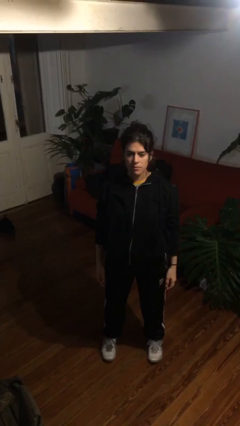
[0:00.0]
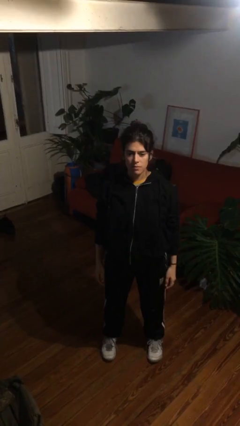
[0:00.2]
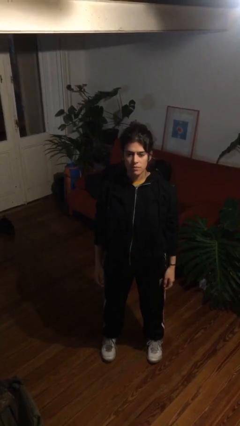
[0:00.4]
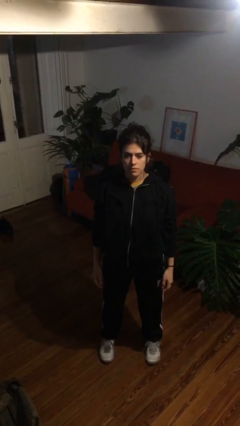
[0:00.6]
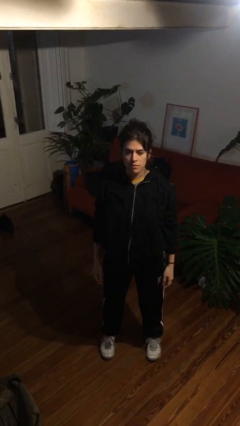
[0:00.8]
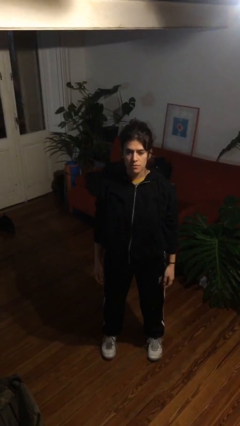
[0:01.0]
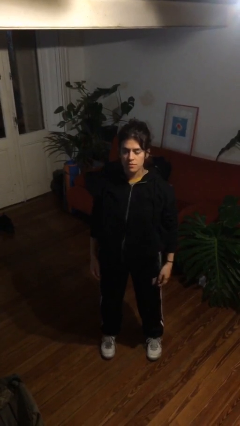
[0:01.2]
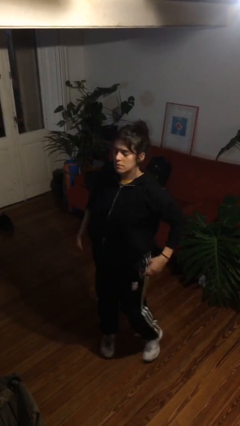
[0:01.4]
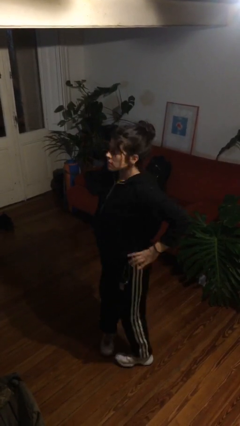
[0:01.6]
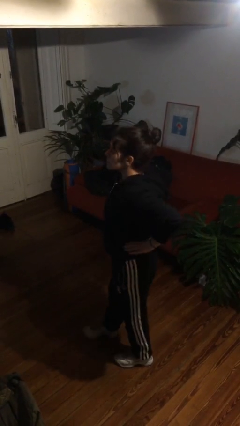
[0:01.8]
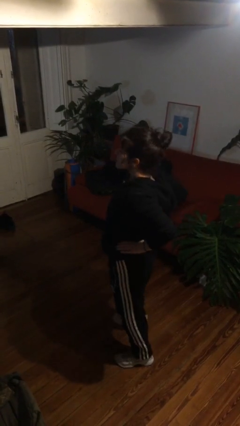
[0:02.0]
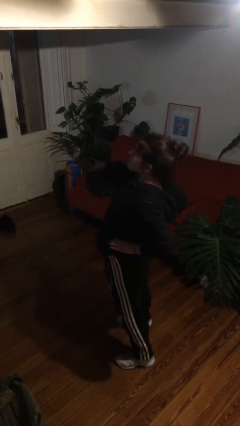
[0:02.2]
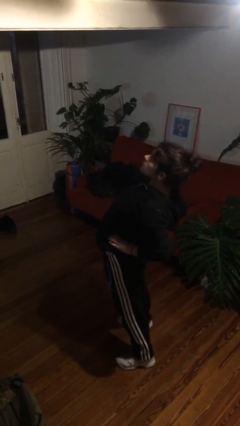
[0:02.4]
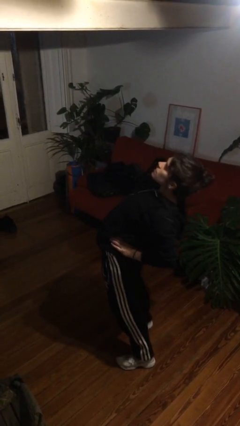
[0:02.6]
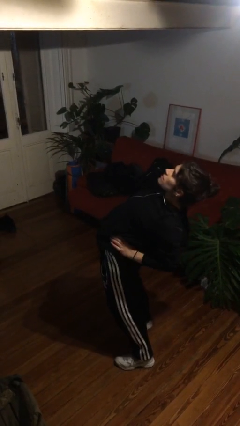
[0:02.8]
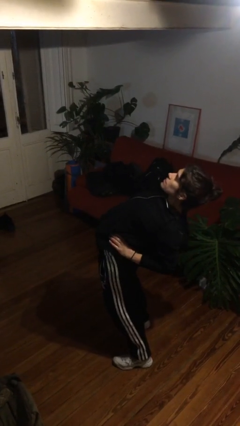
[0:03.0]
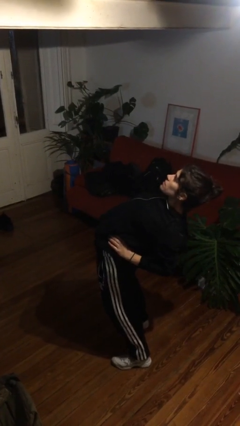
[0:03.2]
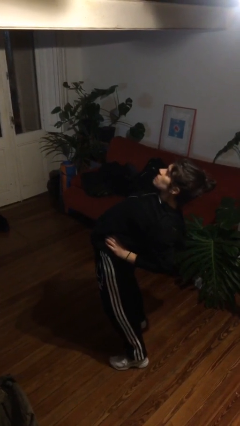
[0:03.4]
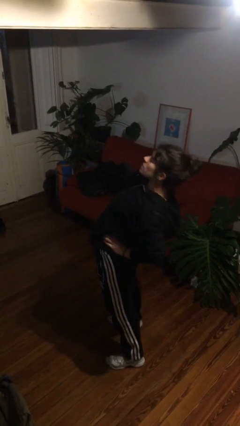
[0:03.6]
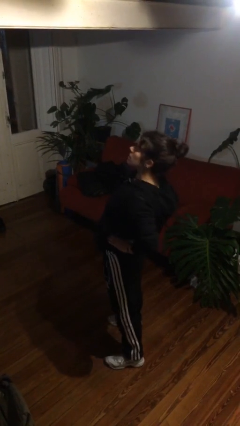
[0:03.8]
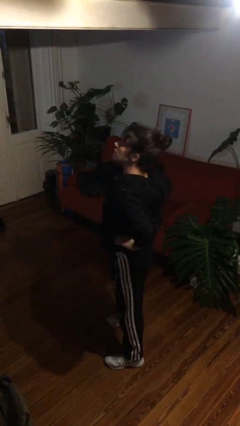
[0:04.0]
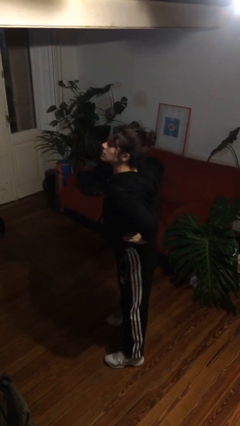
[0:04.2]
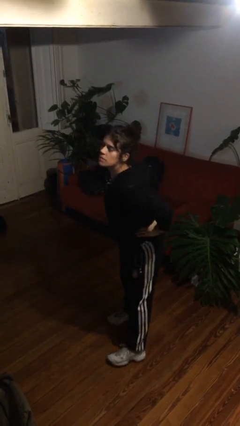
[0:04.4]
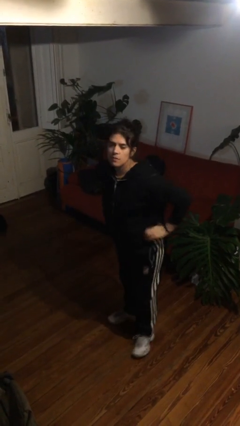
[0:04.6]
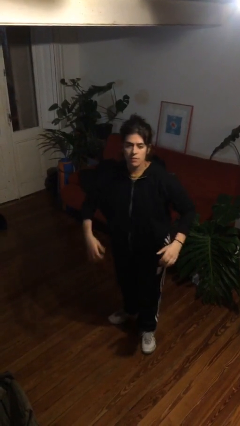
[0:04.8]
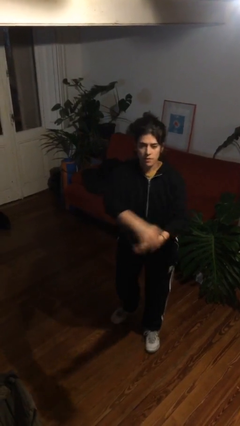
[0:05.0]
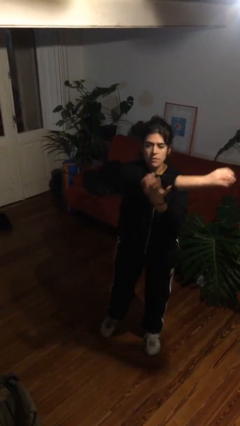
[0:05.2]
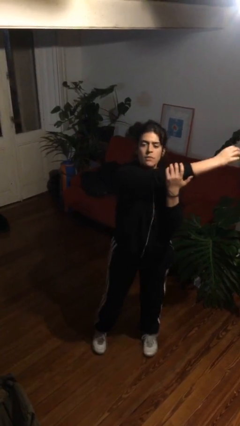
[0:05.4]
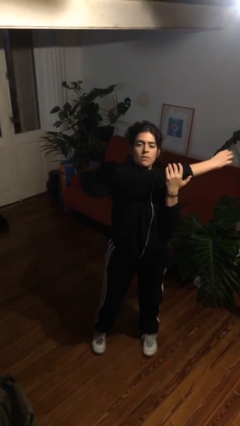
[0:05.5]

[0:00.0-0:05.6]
person stretches back

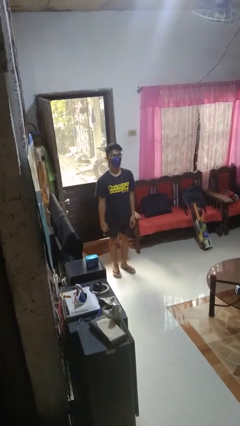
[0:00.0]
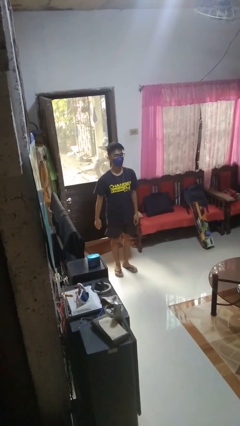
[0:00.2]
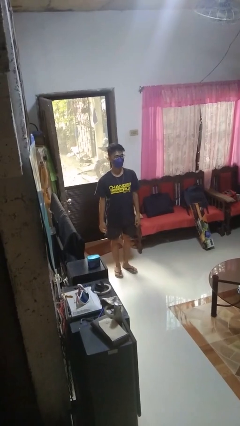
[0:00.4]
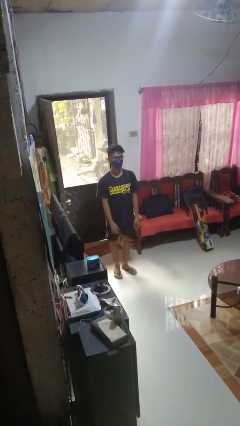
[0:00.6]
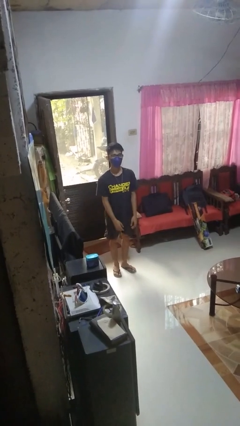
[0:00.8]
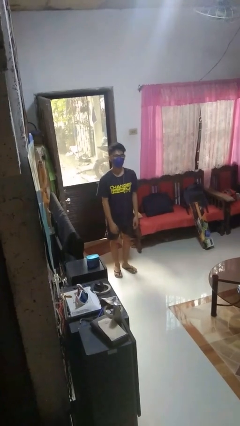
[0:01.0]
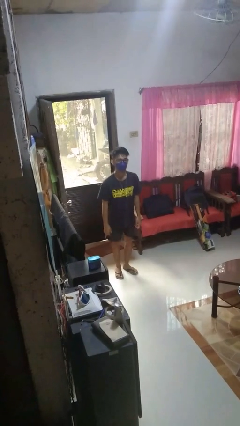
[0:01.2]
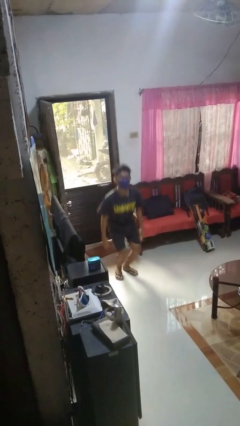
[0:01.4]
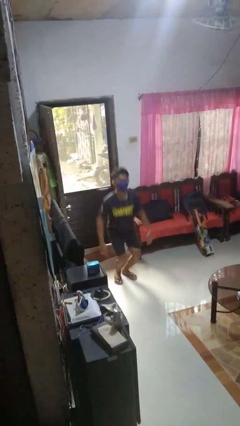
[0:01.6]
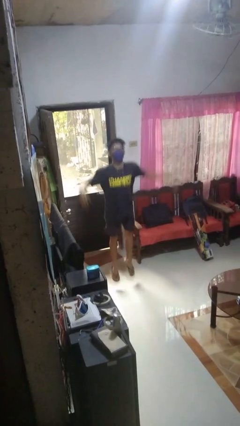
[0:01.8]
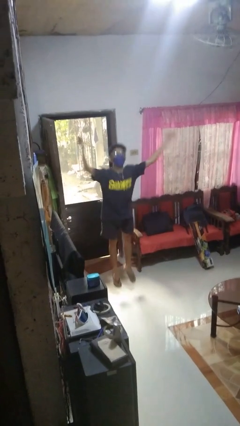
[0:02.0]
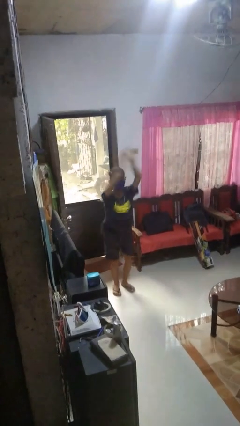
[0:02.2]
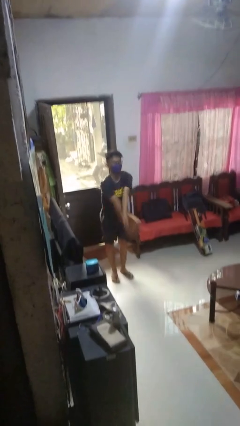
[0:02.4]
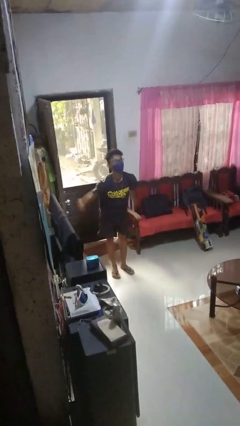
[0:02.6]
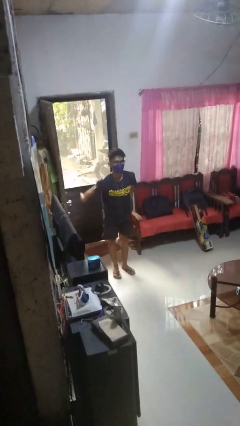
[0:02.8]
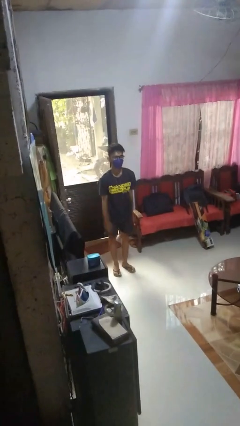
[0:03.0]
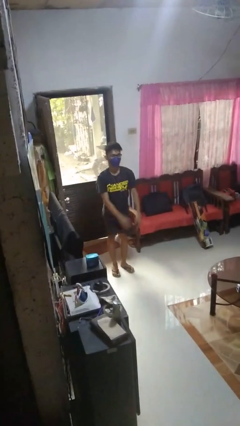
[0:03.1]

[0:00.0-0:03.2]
person jumps

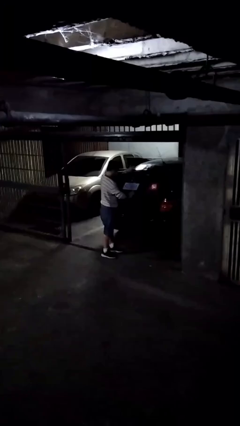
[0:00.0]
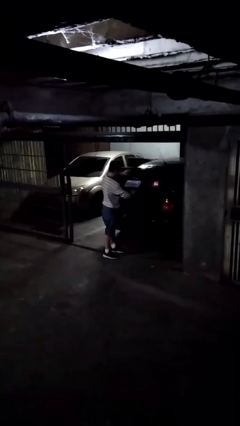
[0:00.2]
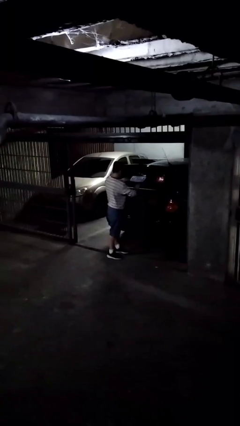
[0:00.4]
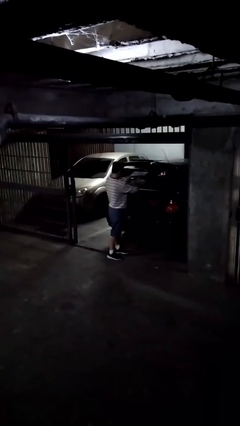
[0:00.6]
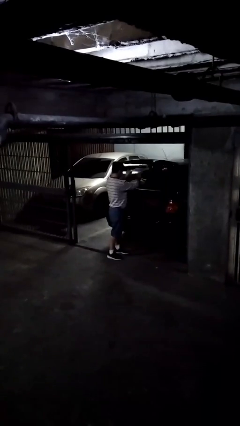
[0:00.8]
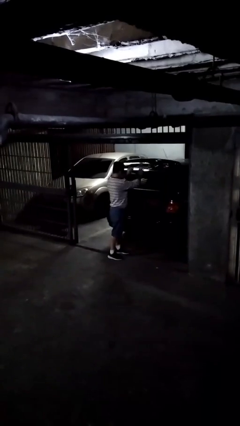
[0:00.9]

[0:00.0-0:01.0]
person opens car trunk

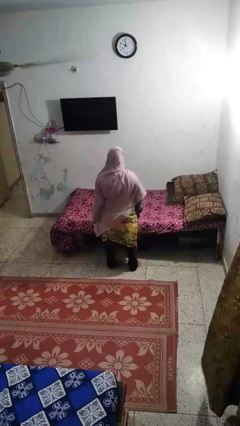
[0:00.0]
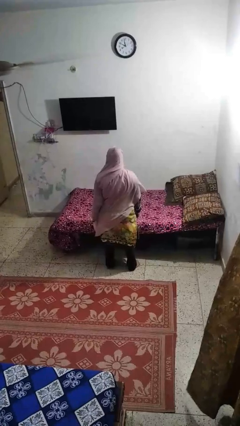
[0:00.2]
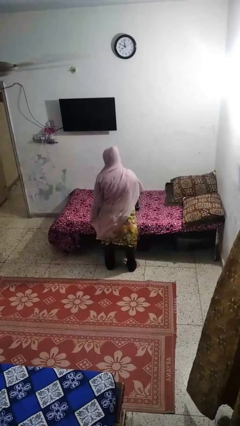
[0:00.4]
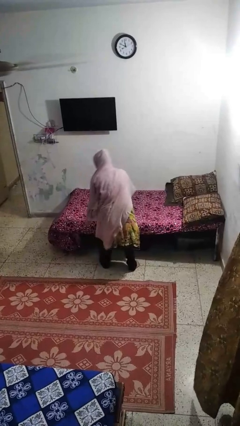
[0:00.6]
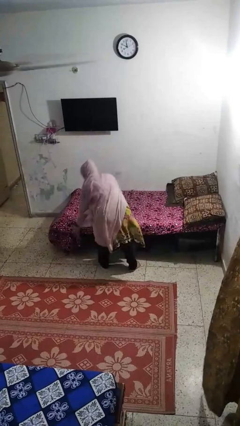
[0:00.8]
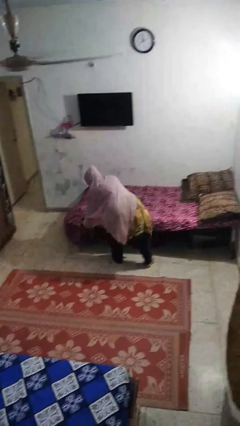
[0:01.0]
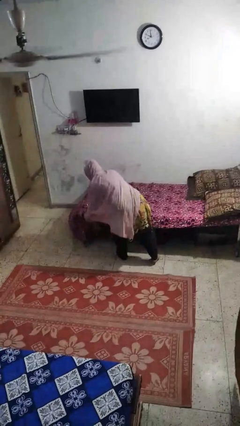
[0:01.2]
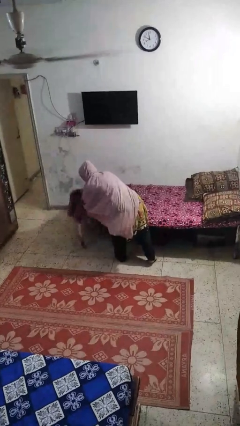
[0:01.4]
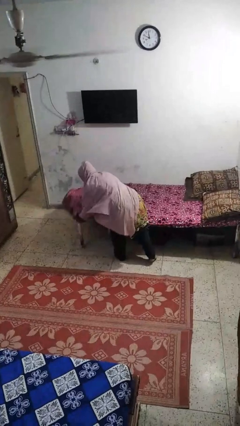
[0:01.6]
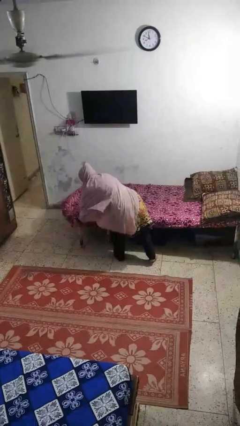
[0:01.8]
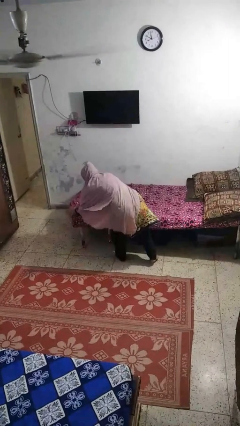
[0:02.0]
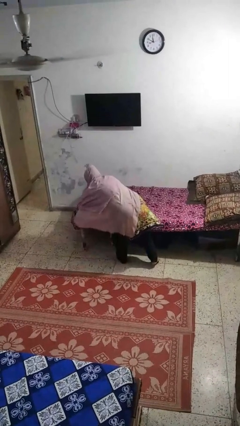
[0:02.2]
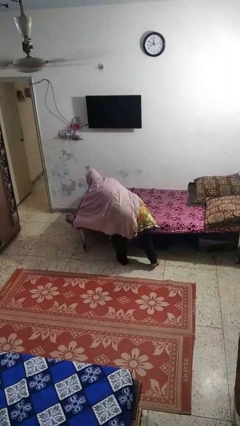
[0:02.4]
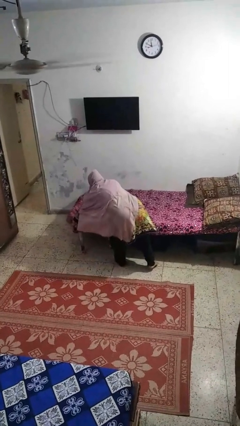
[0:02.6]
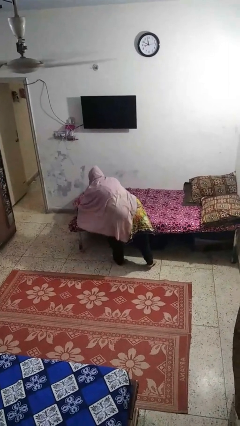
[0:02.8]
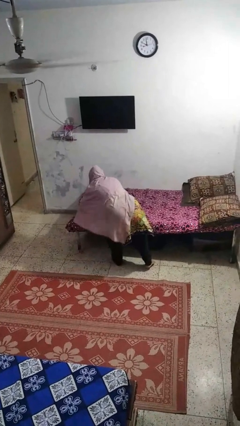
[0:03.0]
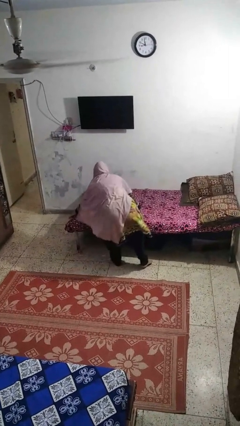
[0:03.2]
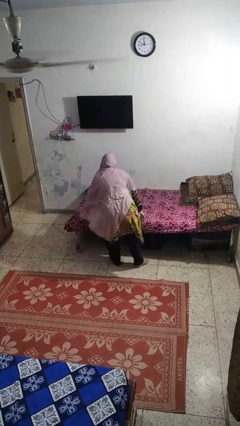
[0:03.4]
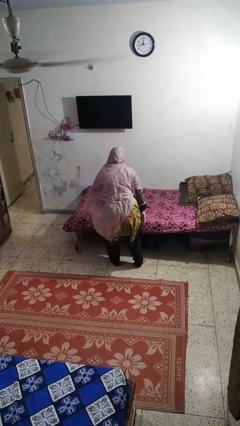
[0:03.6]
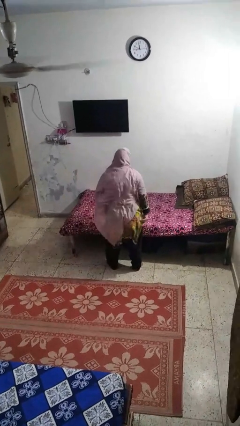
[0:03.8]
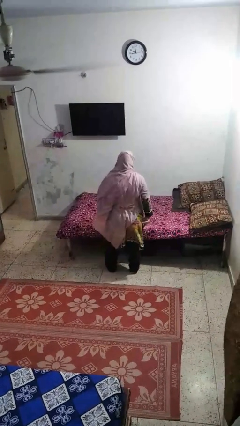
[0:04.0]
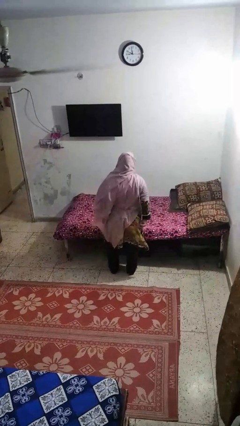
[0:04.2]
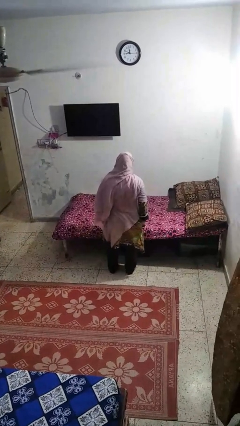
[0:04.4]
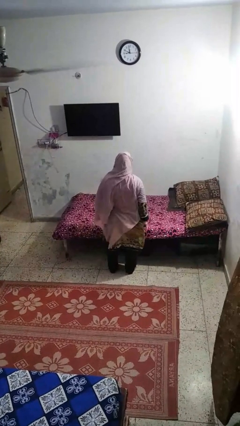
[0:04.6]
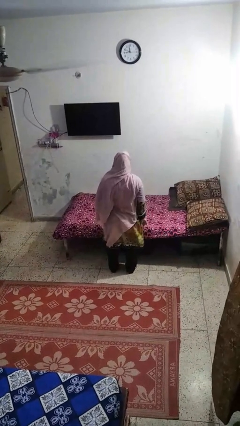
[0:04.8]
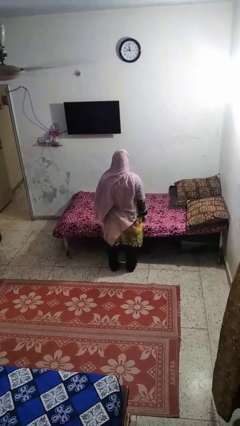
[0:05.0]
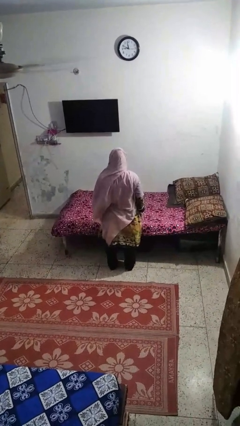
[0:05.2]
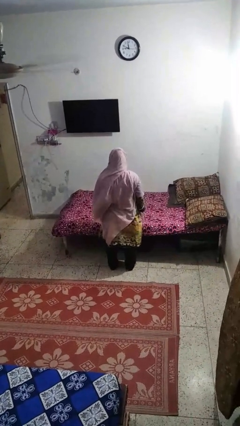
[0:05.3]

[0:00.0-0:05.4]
person makes bed

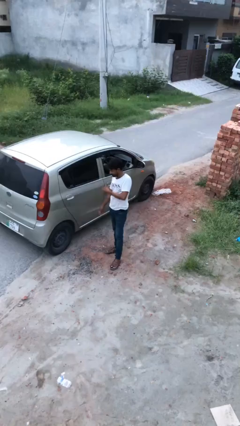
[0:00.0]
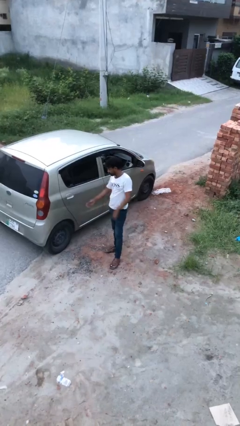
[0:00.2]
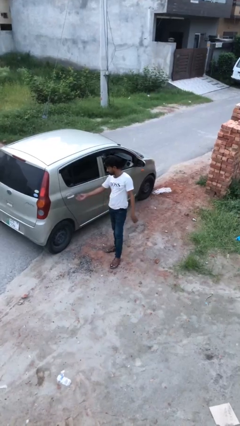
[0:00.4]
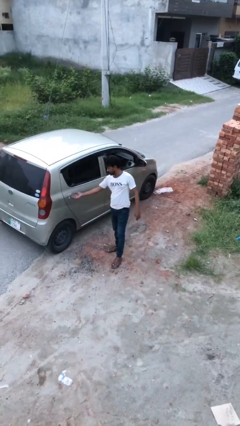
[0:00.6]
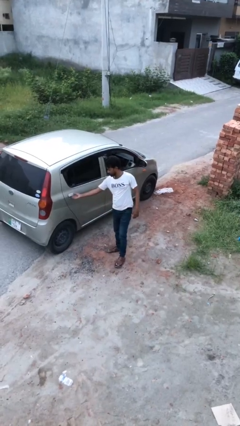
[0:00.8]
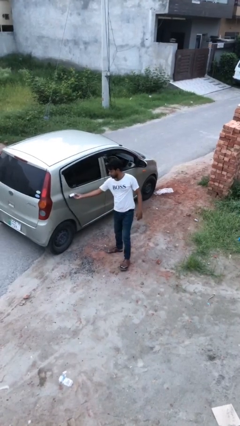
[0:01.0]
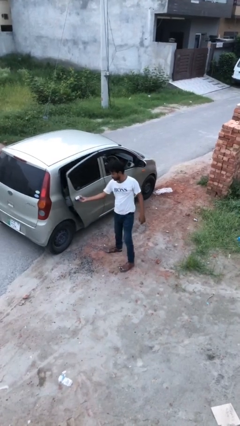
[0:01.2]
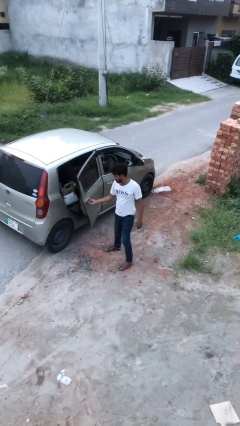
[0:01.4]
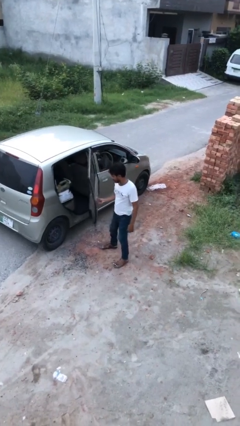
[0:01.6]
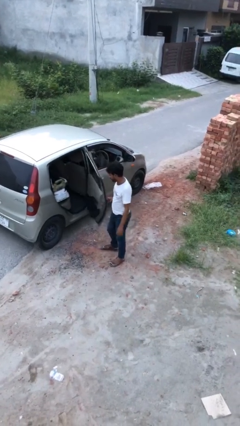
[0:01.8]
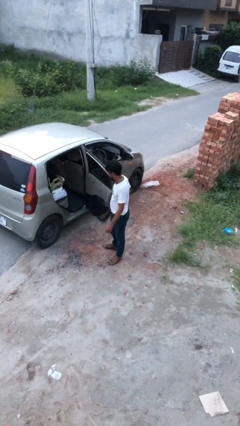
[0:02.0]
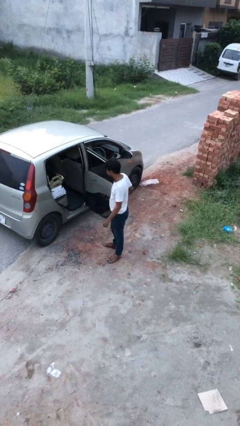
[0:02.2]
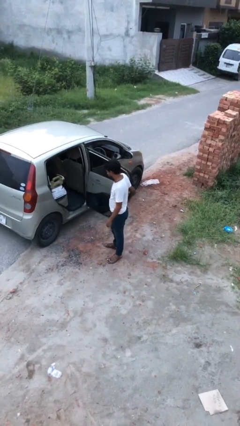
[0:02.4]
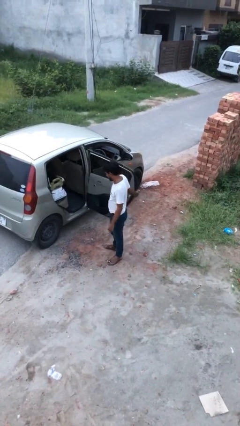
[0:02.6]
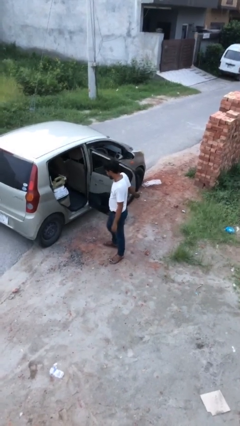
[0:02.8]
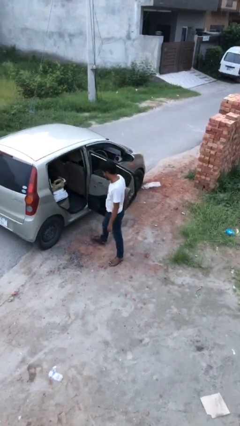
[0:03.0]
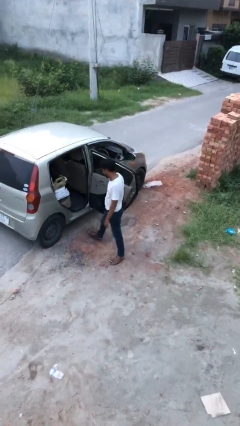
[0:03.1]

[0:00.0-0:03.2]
person opens car door
